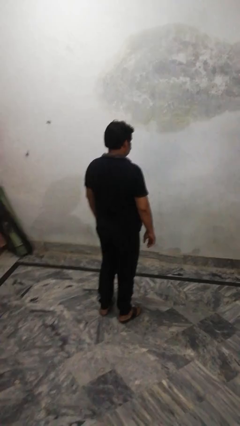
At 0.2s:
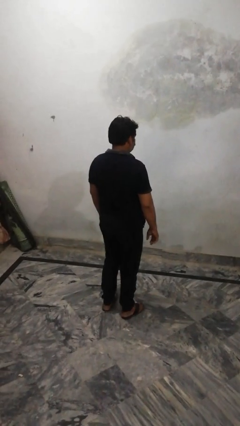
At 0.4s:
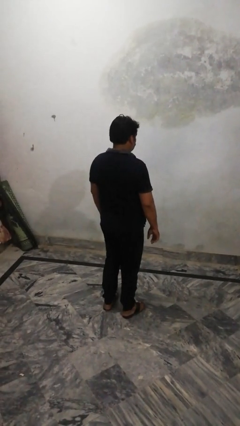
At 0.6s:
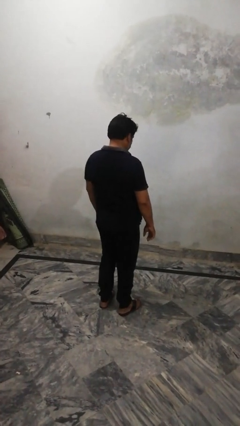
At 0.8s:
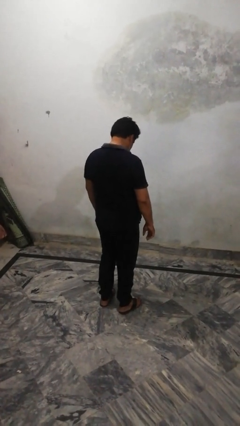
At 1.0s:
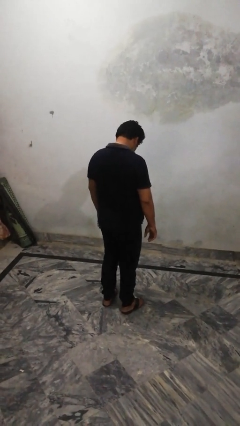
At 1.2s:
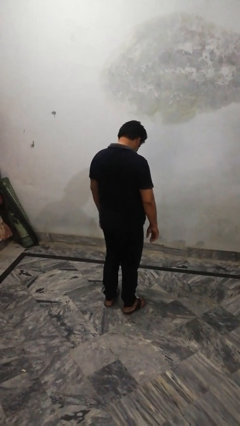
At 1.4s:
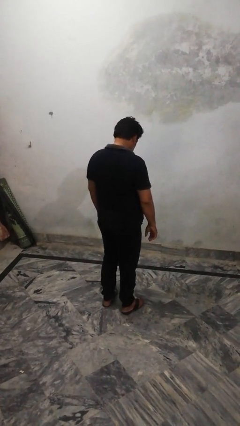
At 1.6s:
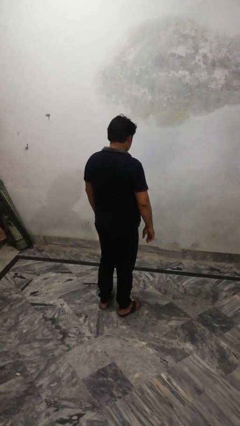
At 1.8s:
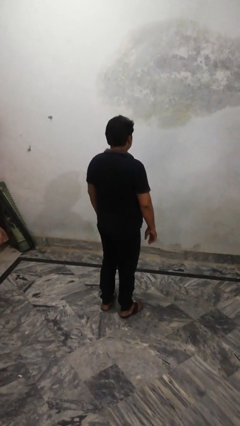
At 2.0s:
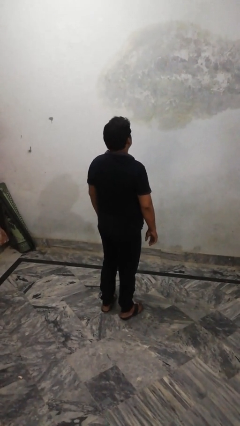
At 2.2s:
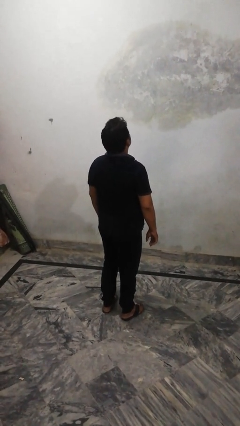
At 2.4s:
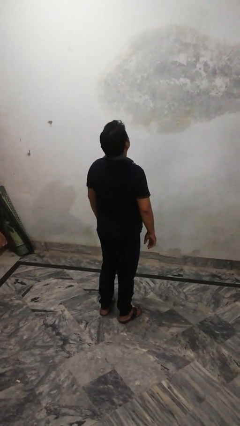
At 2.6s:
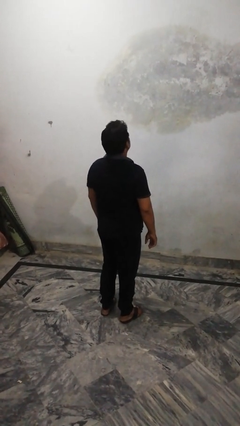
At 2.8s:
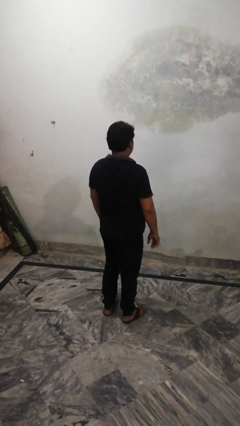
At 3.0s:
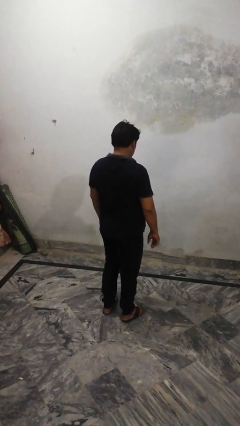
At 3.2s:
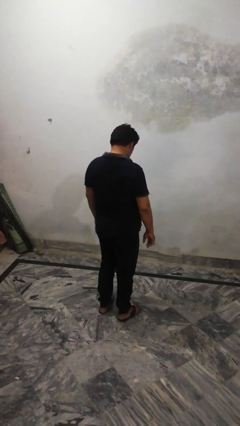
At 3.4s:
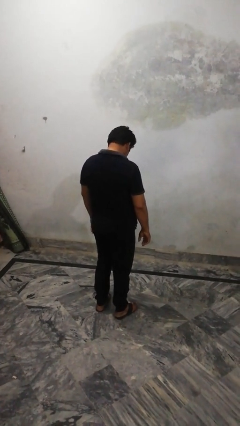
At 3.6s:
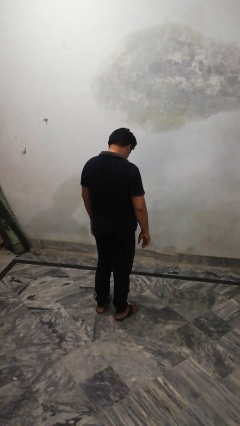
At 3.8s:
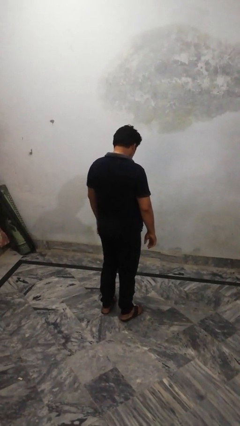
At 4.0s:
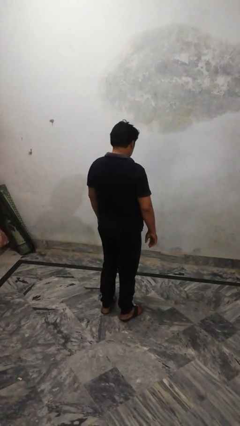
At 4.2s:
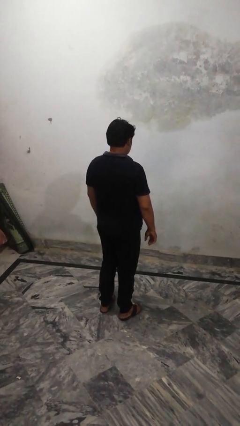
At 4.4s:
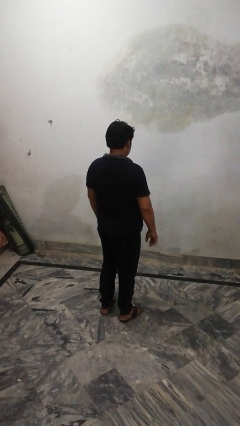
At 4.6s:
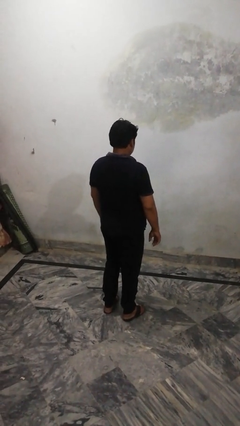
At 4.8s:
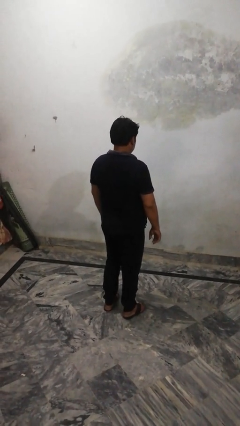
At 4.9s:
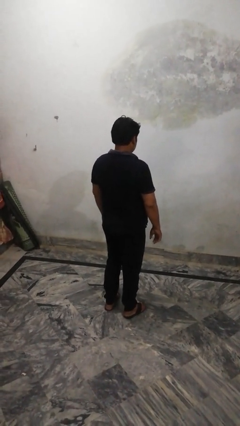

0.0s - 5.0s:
person nods head

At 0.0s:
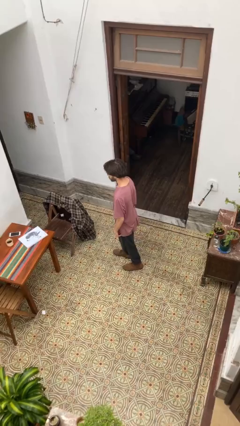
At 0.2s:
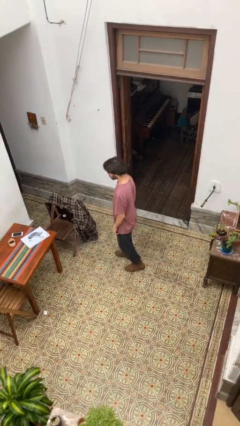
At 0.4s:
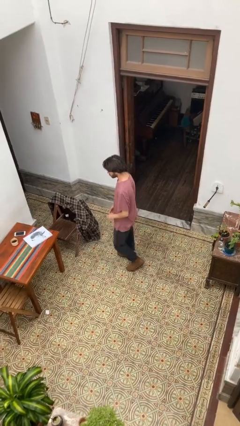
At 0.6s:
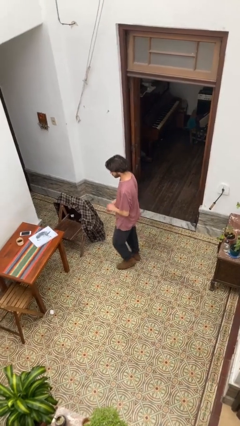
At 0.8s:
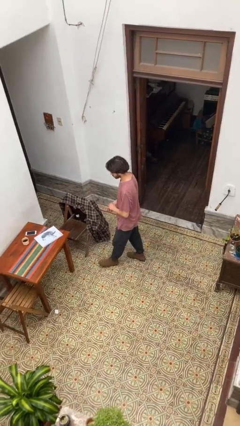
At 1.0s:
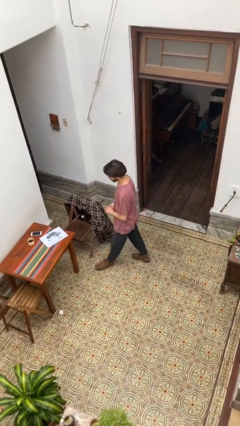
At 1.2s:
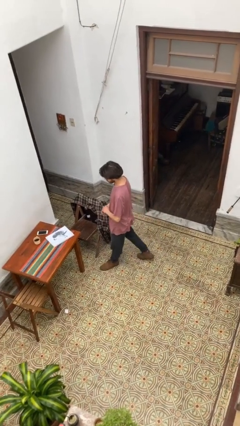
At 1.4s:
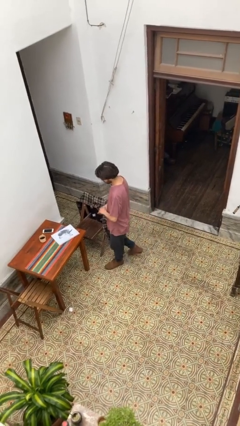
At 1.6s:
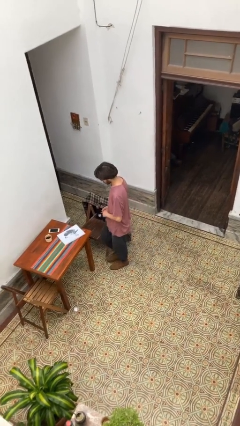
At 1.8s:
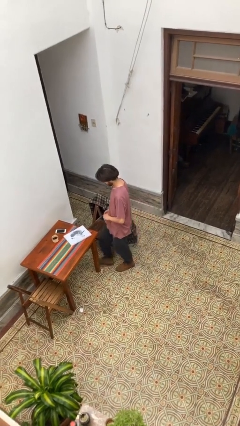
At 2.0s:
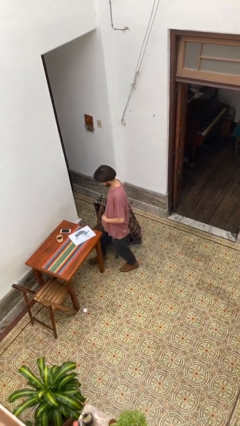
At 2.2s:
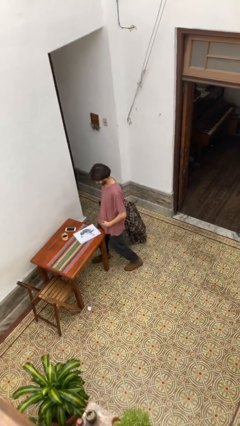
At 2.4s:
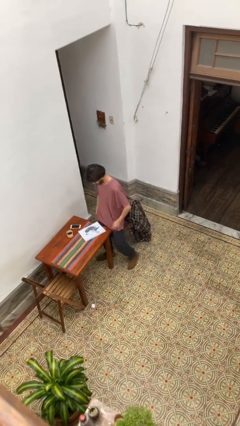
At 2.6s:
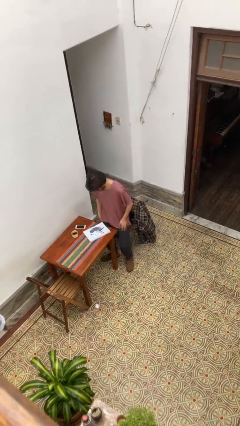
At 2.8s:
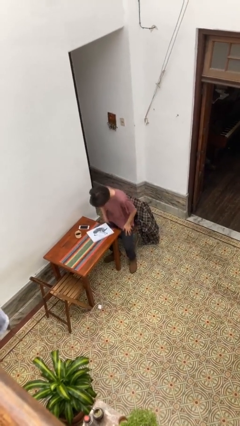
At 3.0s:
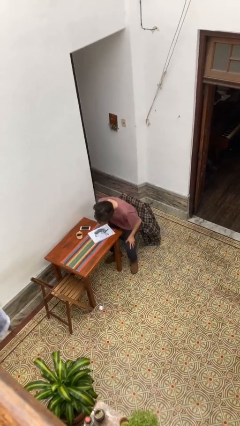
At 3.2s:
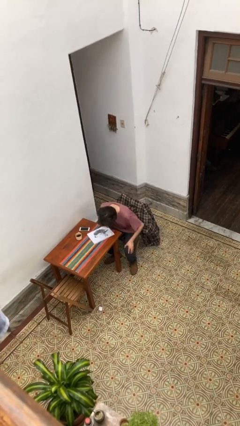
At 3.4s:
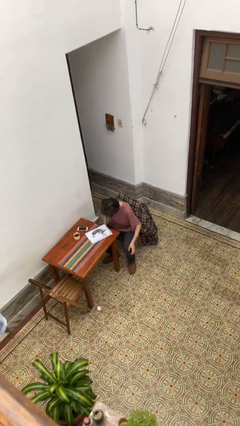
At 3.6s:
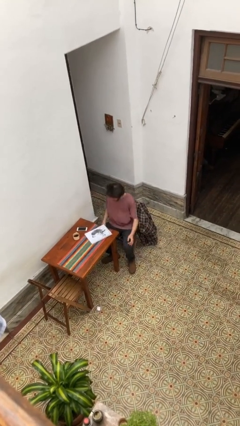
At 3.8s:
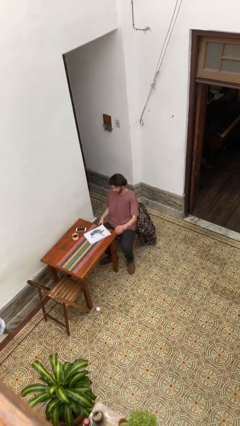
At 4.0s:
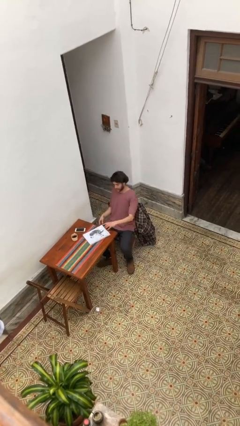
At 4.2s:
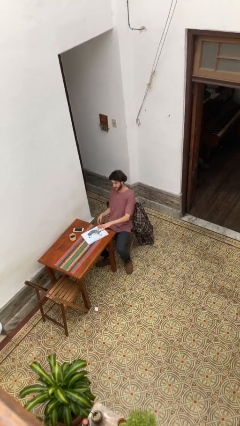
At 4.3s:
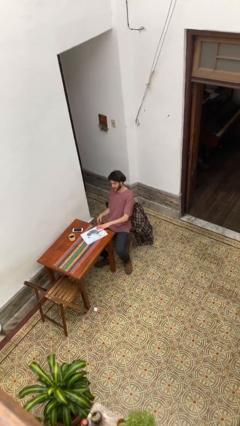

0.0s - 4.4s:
person sits down

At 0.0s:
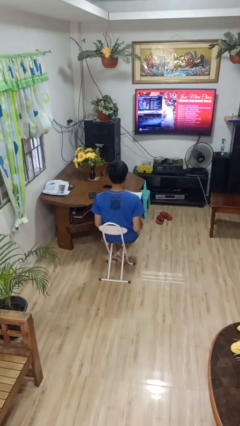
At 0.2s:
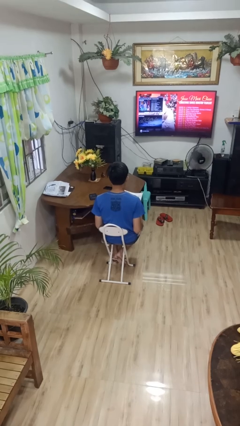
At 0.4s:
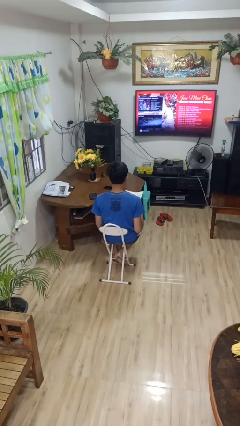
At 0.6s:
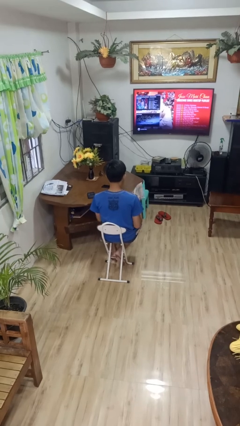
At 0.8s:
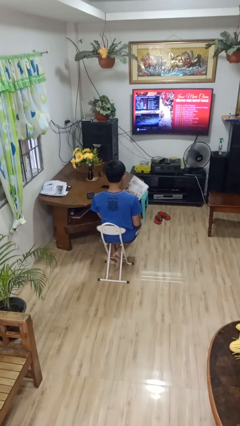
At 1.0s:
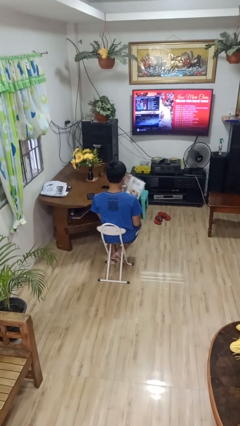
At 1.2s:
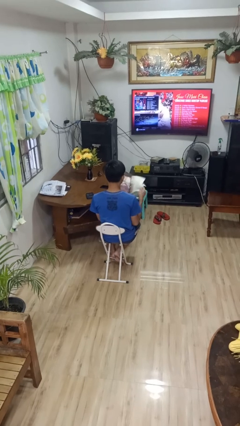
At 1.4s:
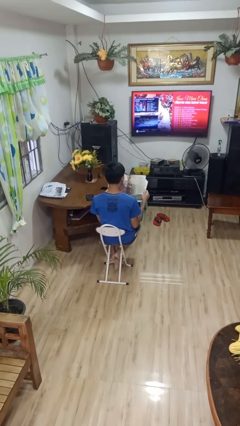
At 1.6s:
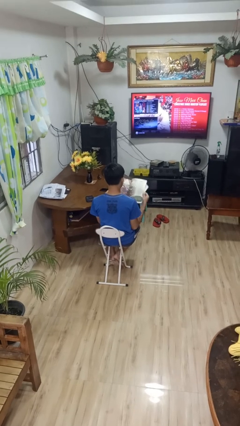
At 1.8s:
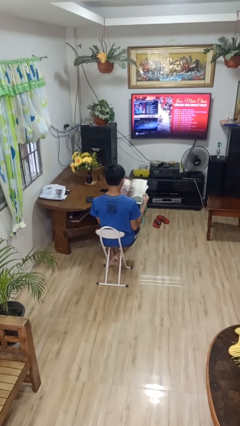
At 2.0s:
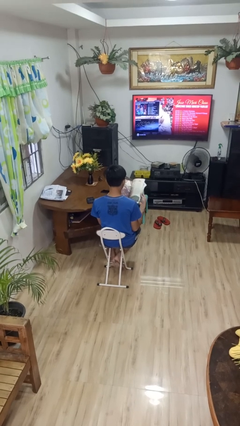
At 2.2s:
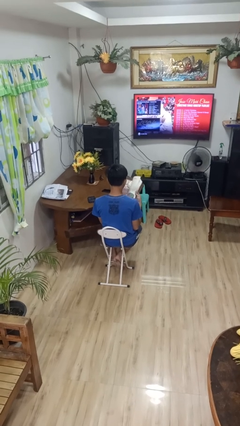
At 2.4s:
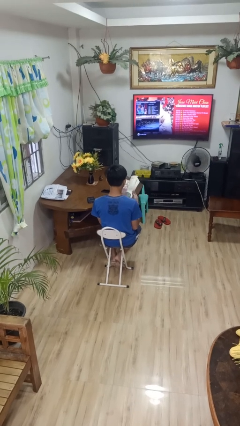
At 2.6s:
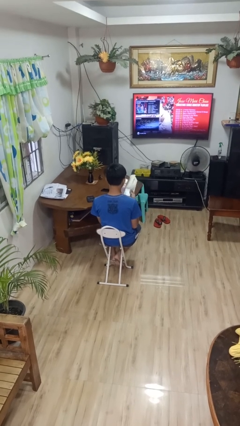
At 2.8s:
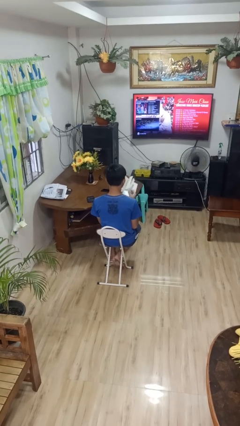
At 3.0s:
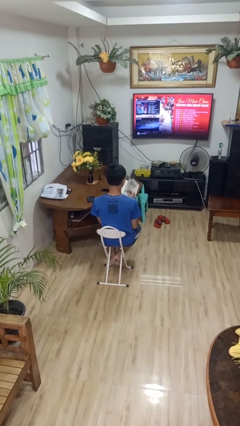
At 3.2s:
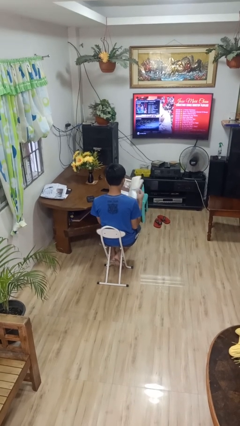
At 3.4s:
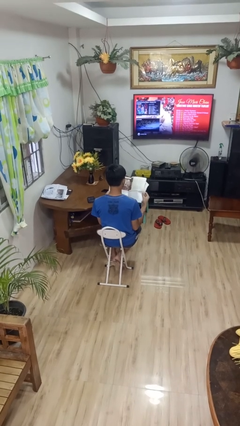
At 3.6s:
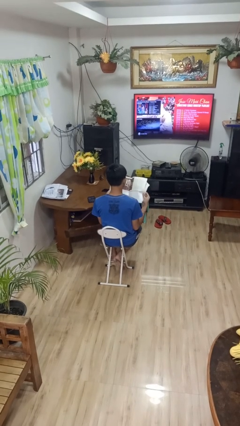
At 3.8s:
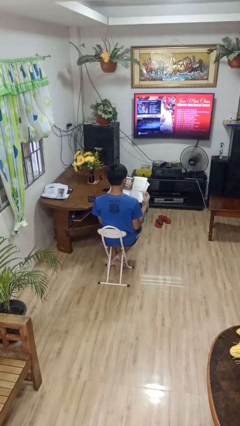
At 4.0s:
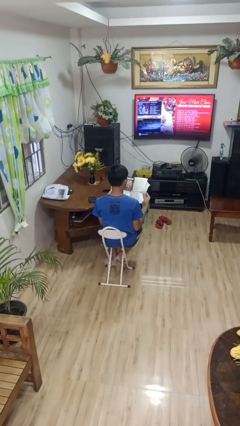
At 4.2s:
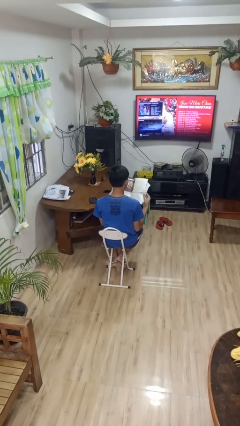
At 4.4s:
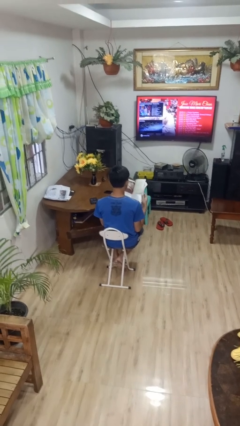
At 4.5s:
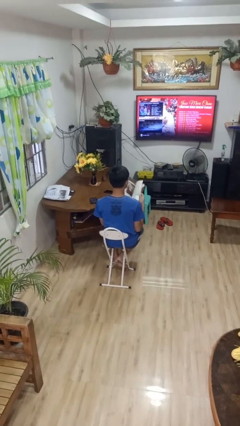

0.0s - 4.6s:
person reads magazine

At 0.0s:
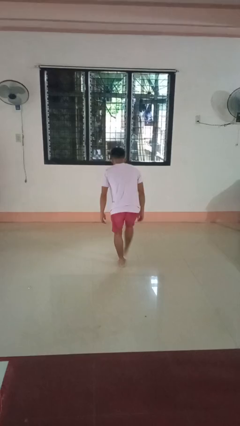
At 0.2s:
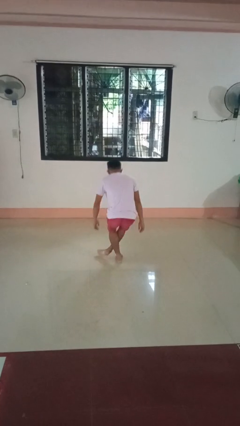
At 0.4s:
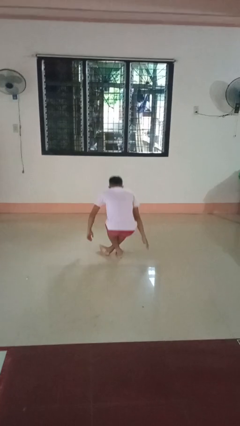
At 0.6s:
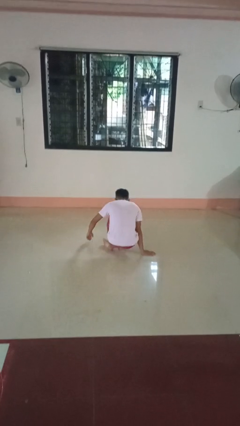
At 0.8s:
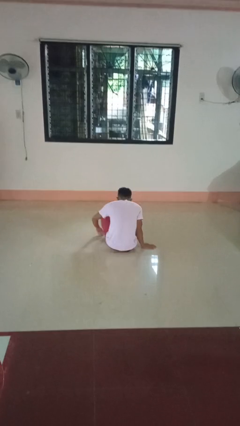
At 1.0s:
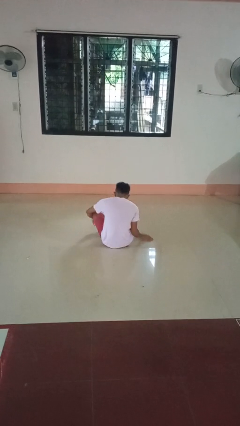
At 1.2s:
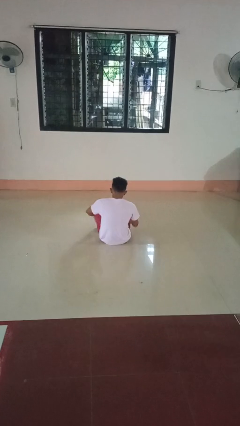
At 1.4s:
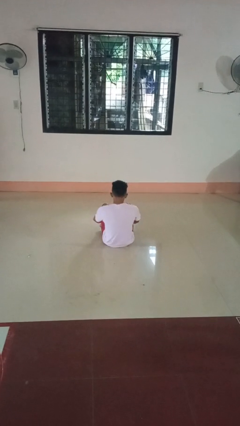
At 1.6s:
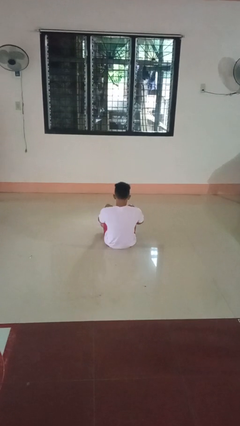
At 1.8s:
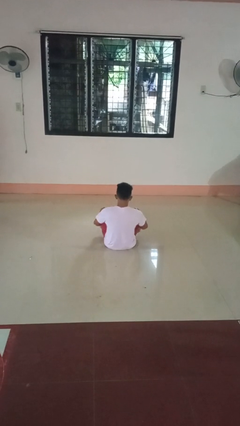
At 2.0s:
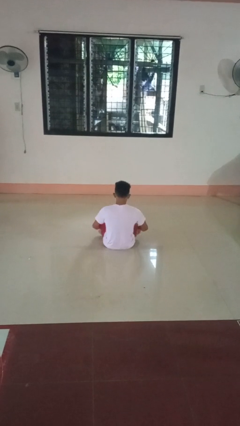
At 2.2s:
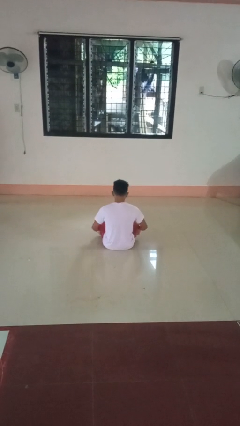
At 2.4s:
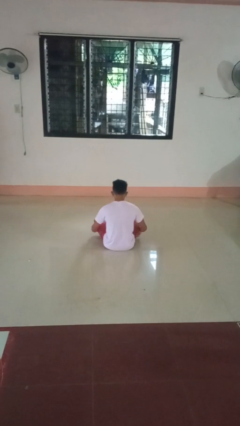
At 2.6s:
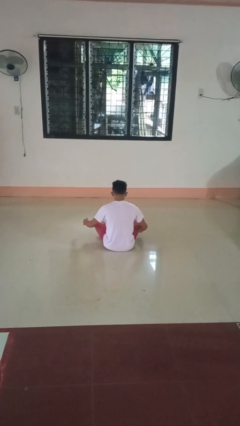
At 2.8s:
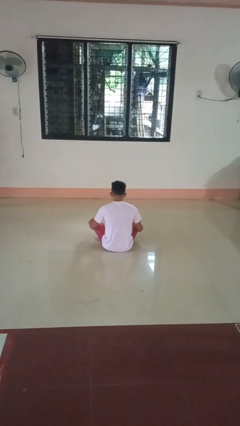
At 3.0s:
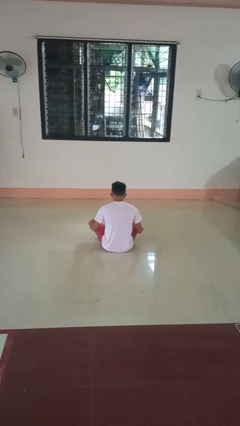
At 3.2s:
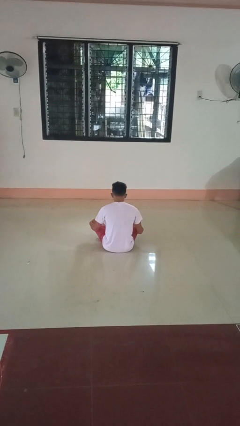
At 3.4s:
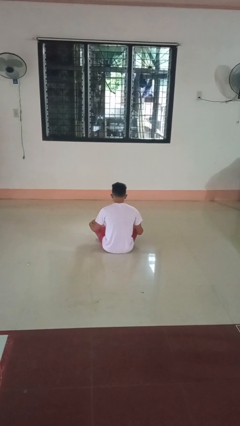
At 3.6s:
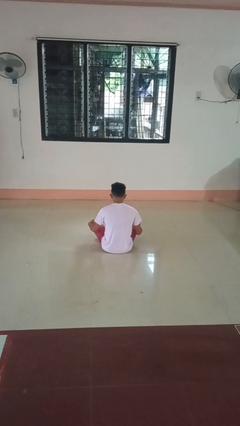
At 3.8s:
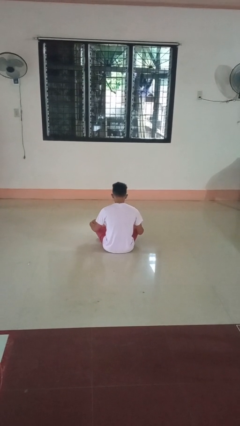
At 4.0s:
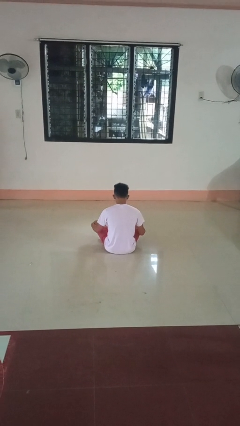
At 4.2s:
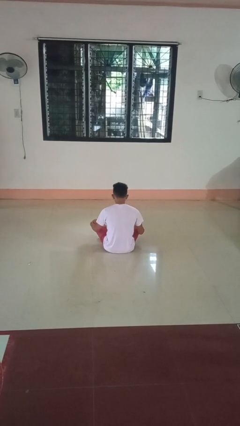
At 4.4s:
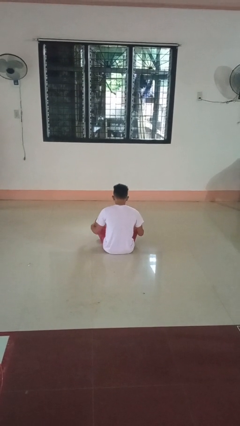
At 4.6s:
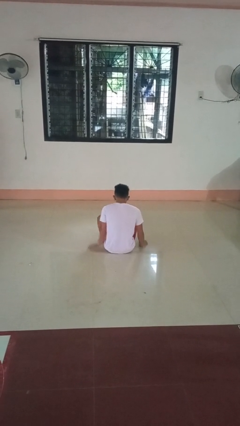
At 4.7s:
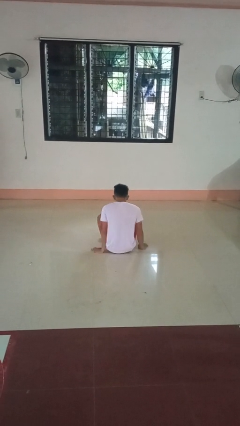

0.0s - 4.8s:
person sits crisscross
